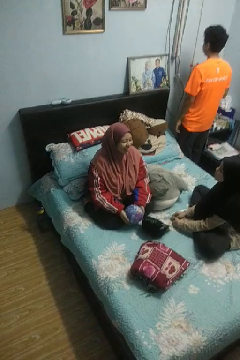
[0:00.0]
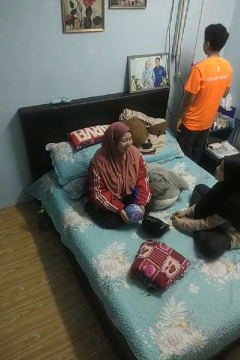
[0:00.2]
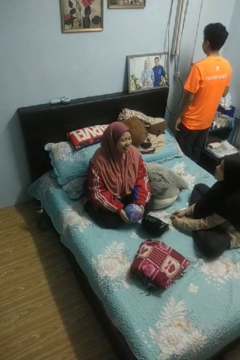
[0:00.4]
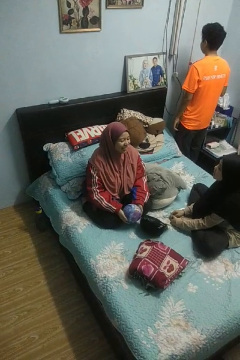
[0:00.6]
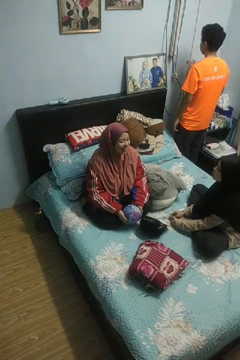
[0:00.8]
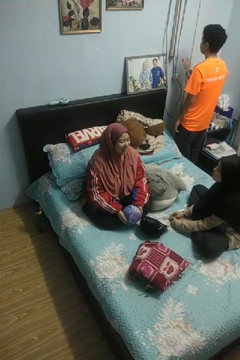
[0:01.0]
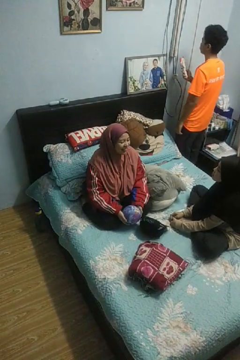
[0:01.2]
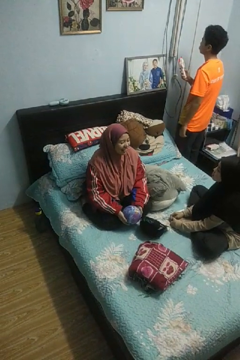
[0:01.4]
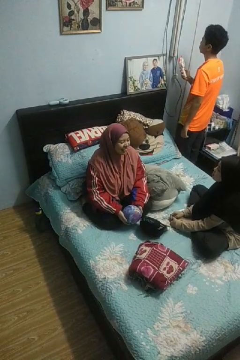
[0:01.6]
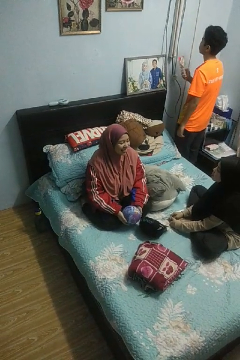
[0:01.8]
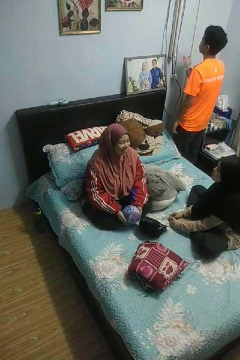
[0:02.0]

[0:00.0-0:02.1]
person laughs with person

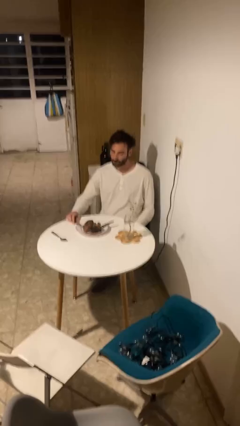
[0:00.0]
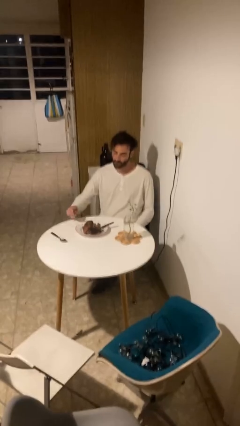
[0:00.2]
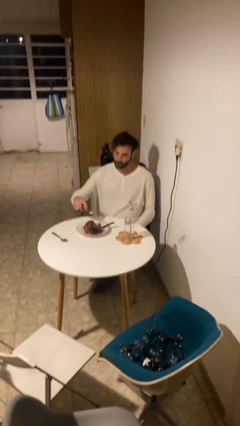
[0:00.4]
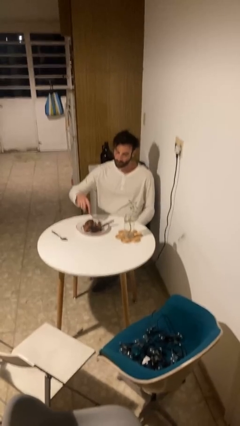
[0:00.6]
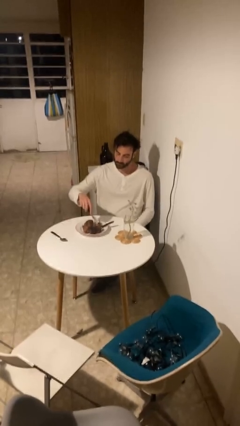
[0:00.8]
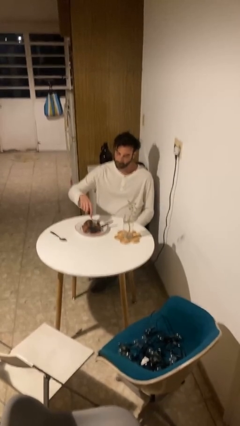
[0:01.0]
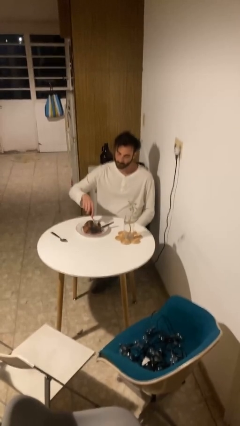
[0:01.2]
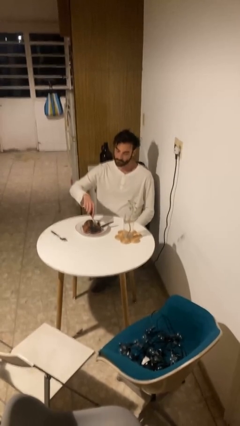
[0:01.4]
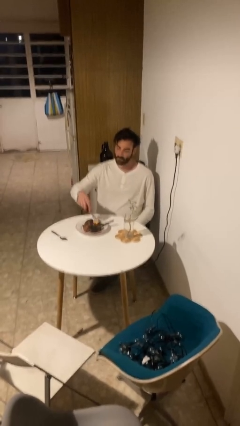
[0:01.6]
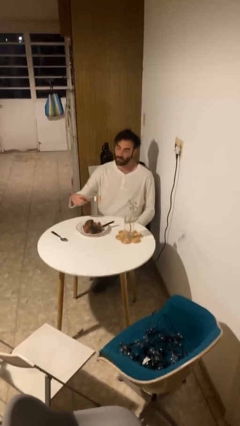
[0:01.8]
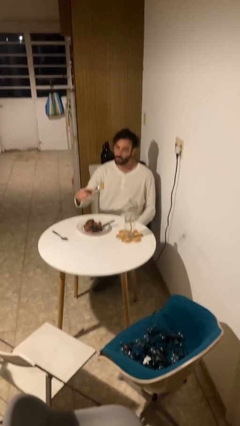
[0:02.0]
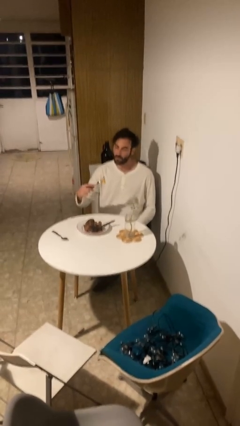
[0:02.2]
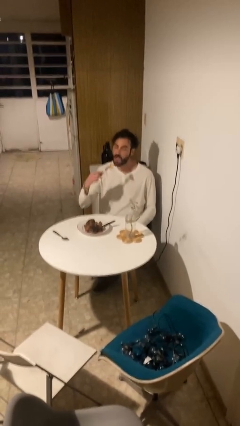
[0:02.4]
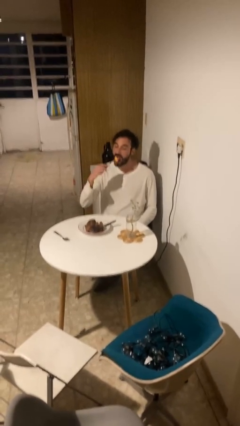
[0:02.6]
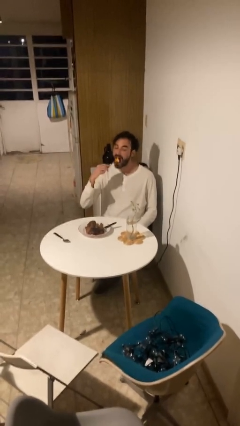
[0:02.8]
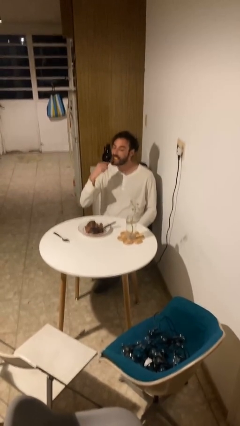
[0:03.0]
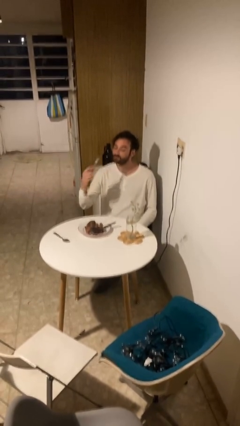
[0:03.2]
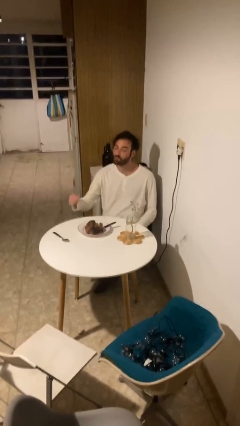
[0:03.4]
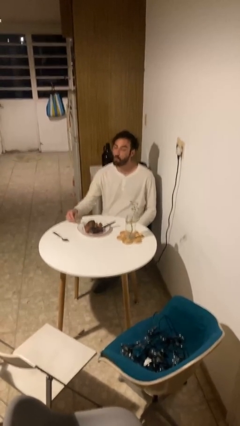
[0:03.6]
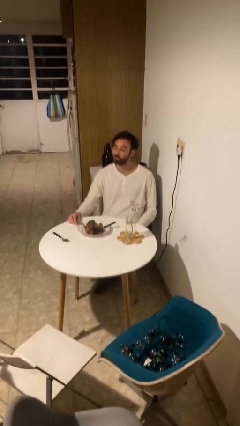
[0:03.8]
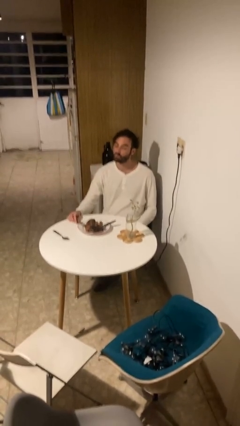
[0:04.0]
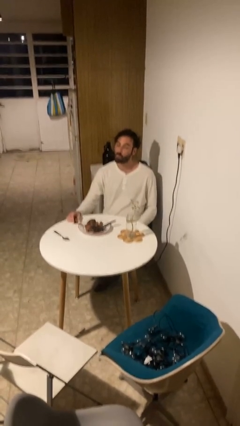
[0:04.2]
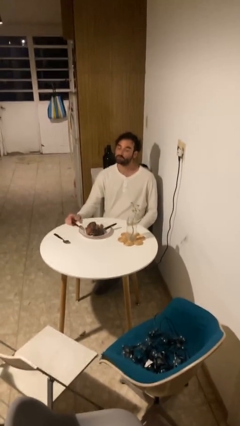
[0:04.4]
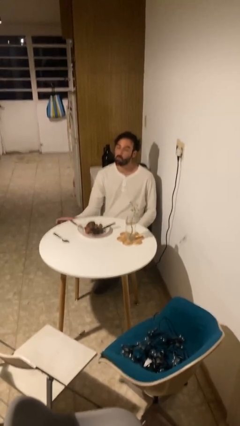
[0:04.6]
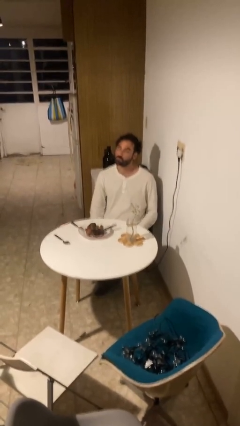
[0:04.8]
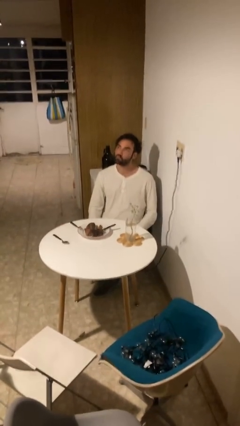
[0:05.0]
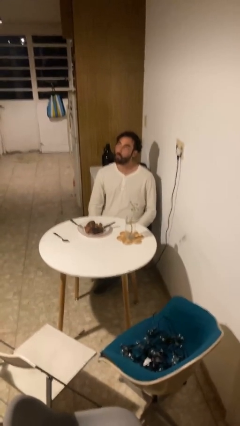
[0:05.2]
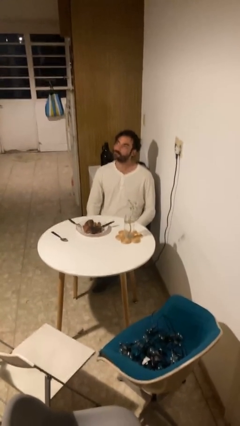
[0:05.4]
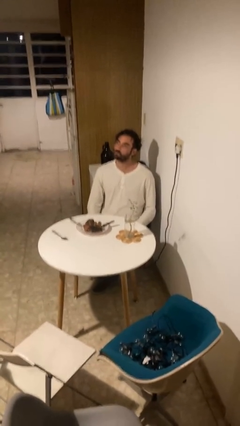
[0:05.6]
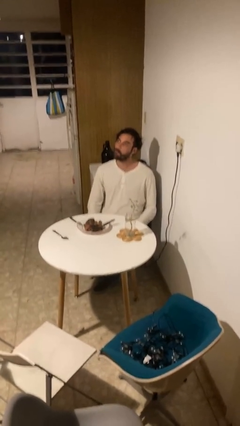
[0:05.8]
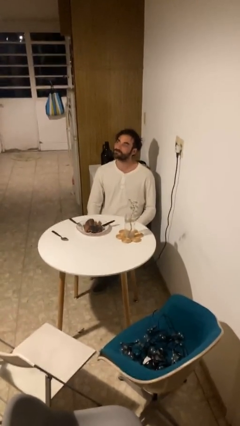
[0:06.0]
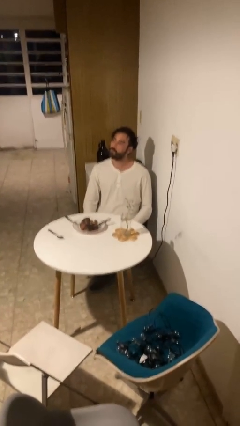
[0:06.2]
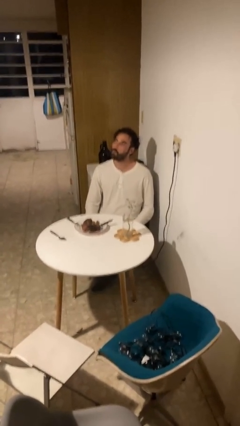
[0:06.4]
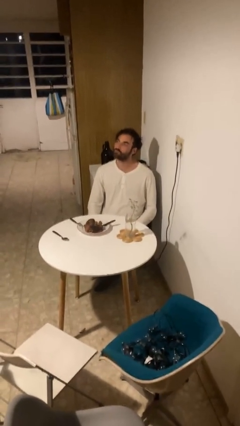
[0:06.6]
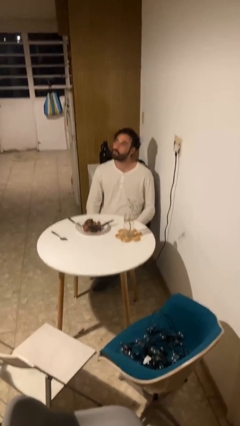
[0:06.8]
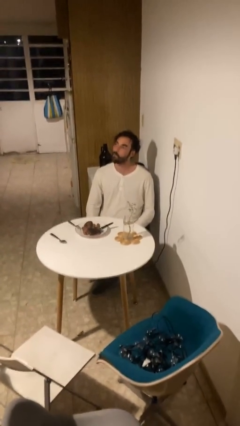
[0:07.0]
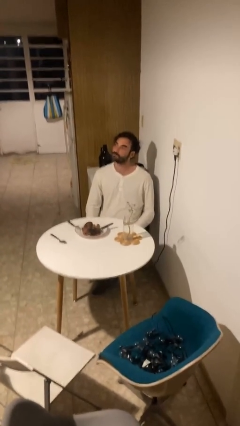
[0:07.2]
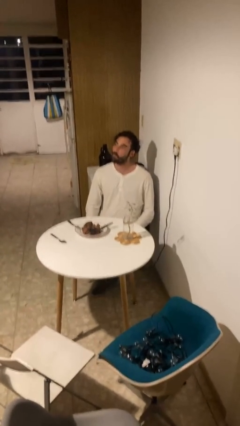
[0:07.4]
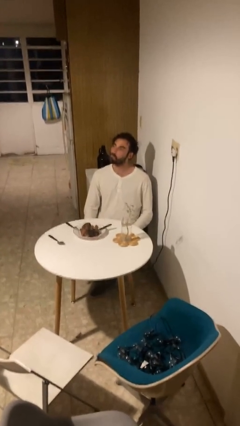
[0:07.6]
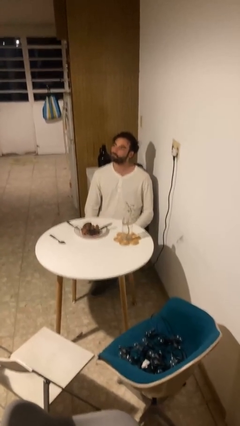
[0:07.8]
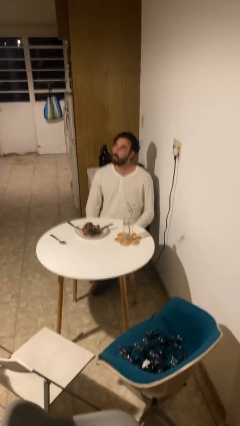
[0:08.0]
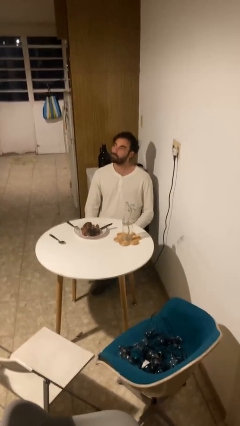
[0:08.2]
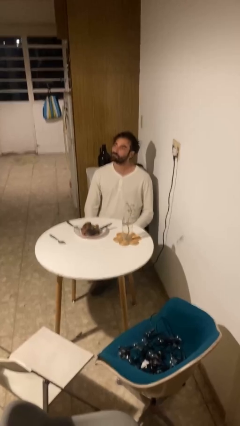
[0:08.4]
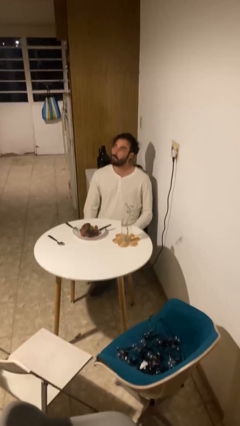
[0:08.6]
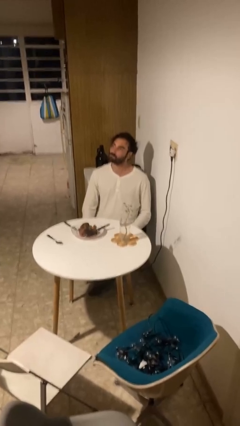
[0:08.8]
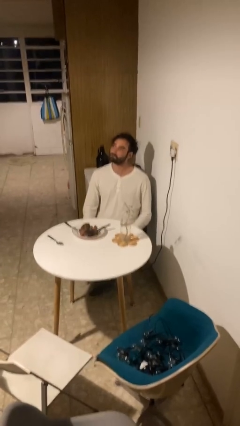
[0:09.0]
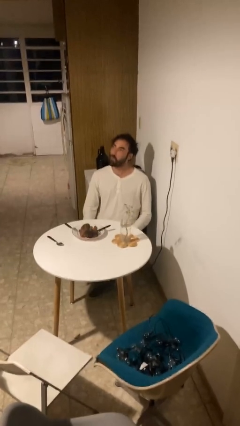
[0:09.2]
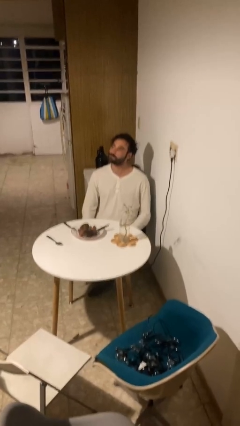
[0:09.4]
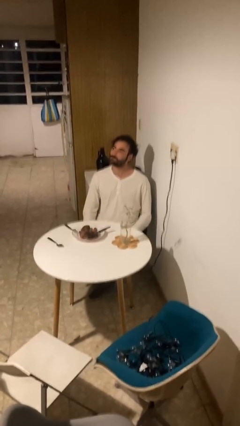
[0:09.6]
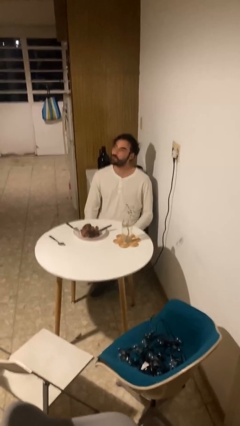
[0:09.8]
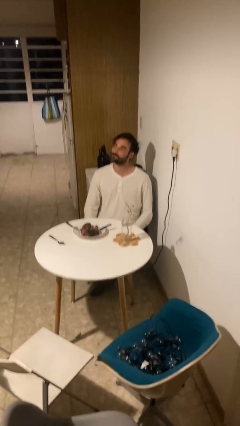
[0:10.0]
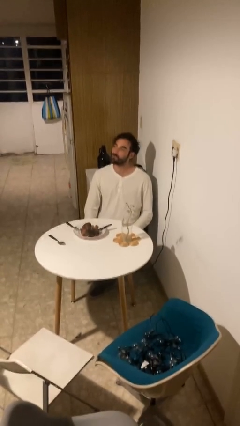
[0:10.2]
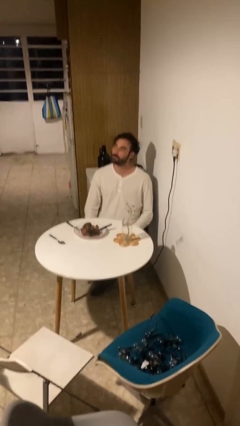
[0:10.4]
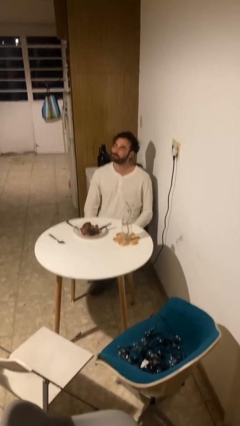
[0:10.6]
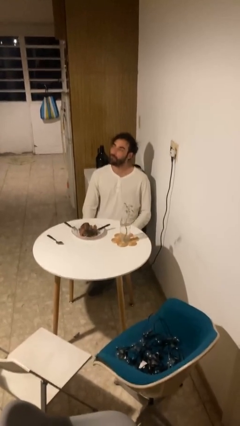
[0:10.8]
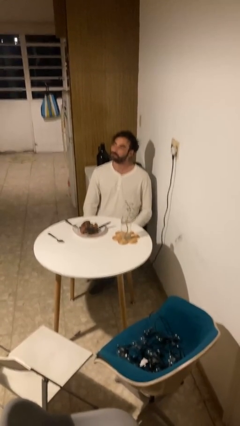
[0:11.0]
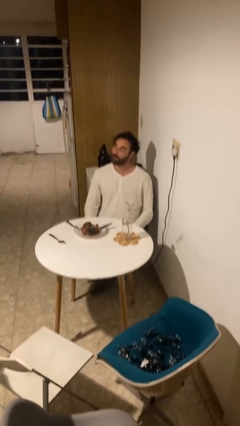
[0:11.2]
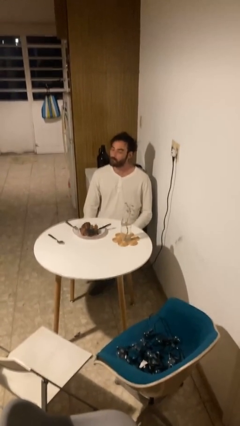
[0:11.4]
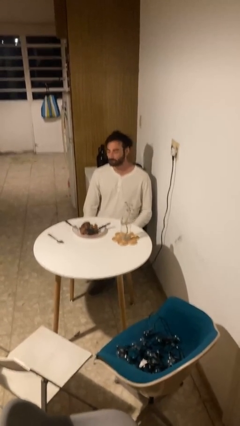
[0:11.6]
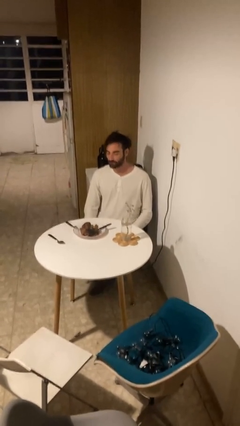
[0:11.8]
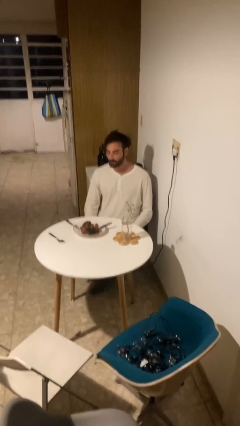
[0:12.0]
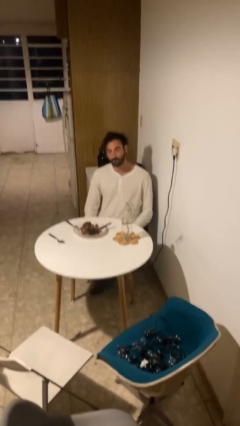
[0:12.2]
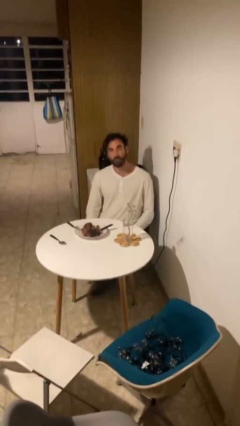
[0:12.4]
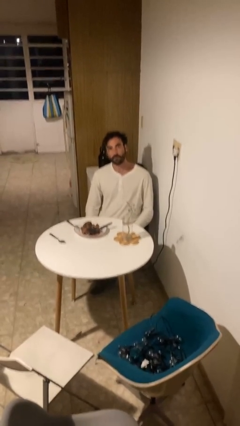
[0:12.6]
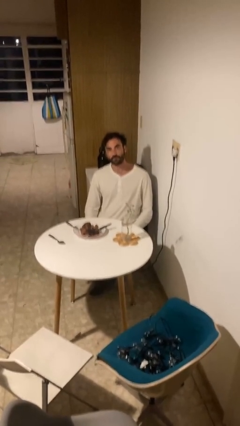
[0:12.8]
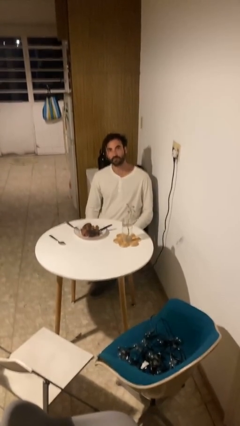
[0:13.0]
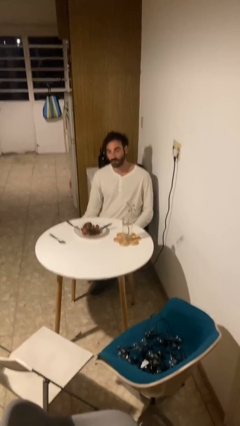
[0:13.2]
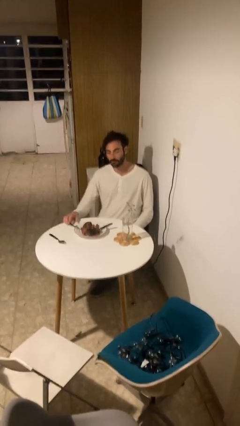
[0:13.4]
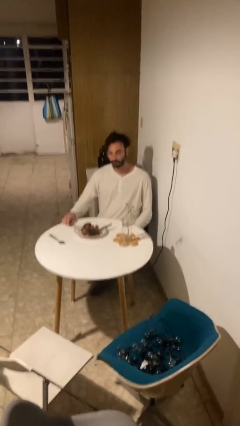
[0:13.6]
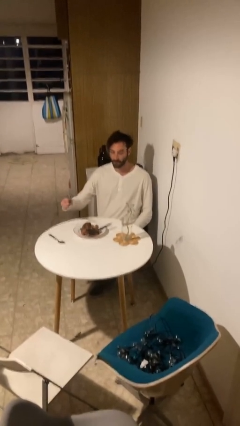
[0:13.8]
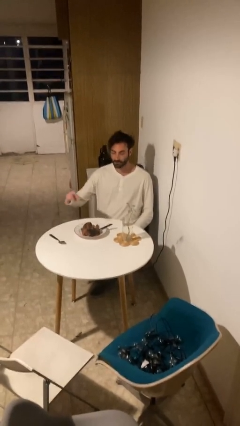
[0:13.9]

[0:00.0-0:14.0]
person eats with utensil

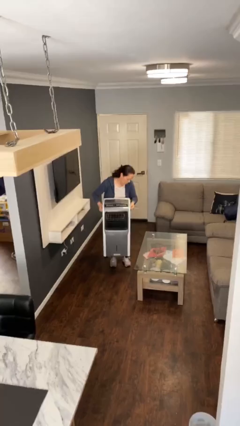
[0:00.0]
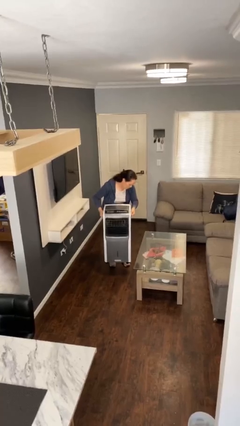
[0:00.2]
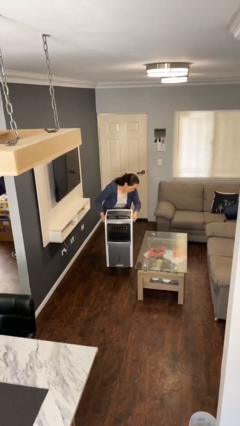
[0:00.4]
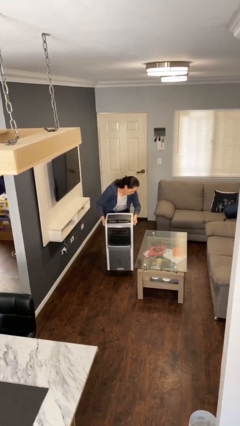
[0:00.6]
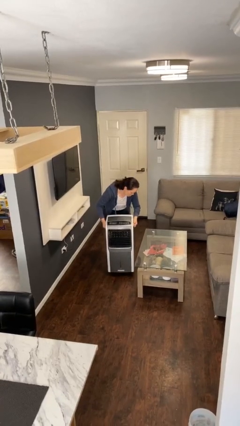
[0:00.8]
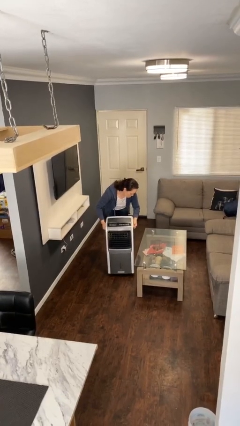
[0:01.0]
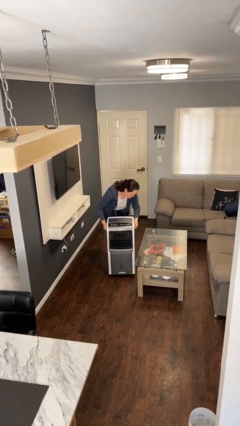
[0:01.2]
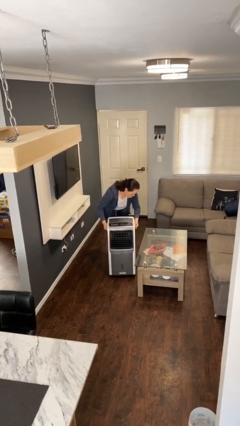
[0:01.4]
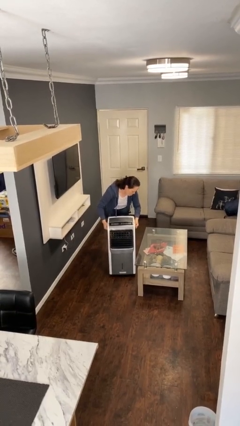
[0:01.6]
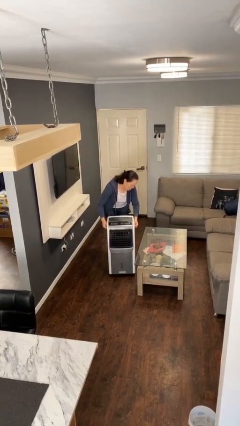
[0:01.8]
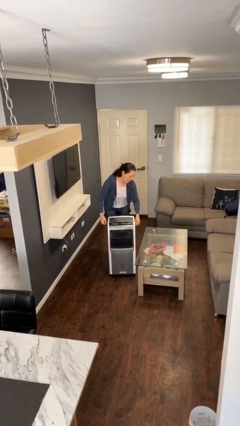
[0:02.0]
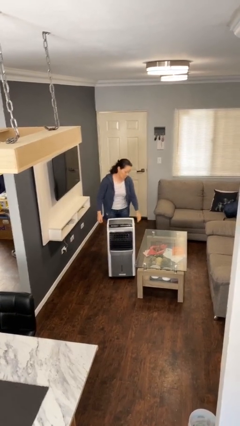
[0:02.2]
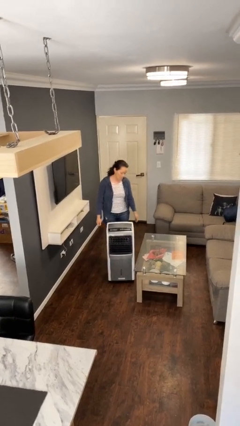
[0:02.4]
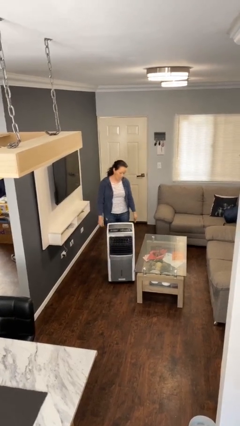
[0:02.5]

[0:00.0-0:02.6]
person puts down object on floor
